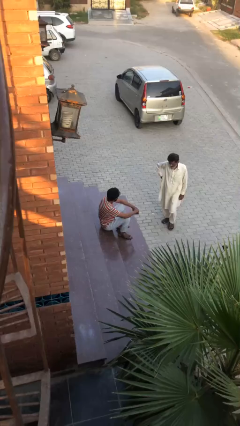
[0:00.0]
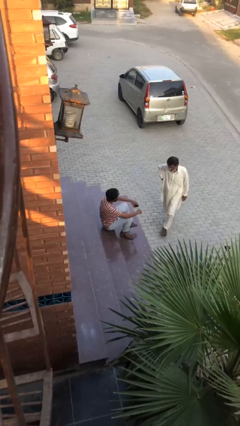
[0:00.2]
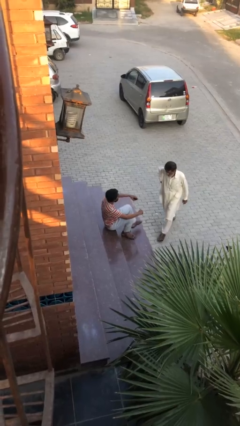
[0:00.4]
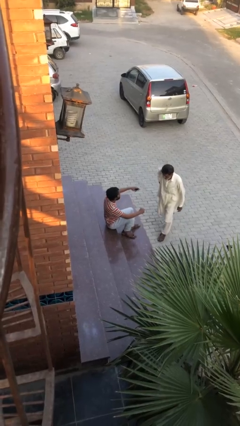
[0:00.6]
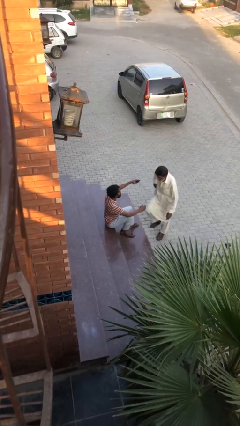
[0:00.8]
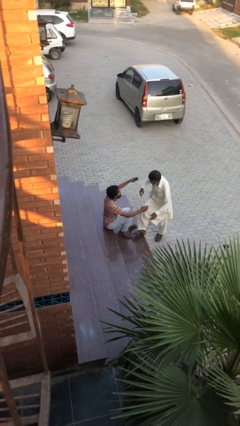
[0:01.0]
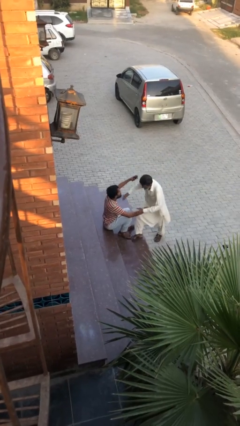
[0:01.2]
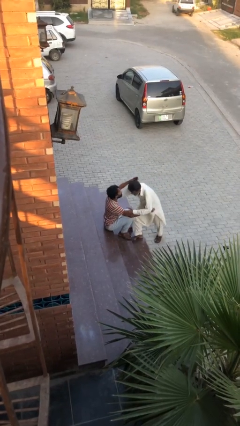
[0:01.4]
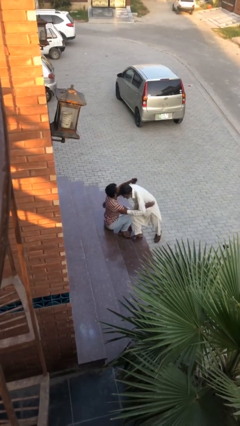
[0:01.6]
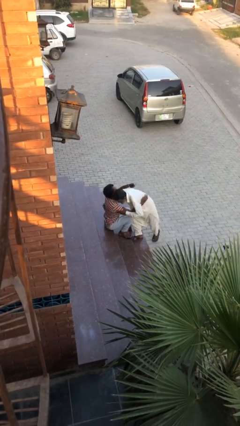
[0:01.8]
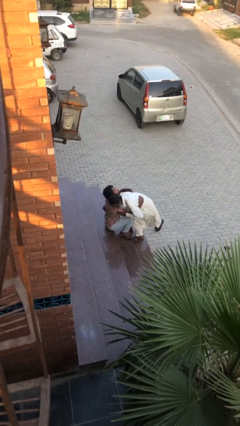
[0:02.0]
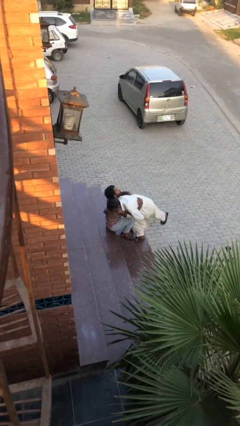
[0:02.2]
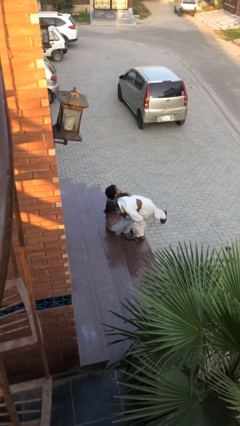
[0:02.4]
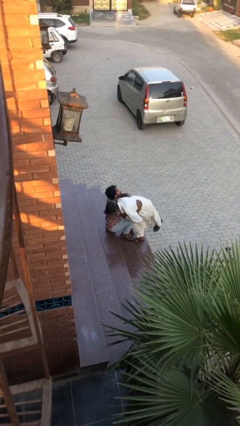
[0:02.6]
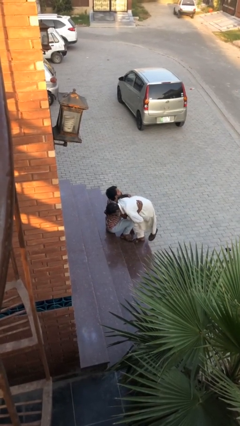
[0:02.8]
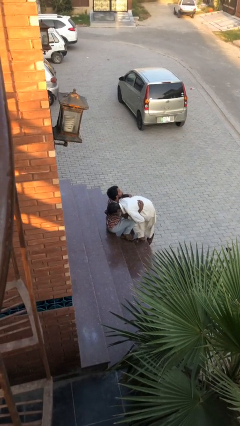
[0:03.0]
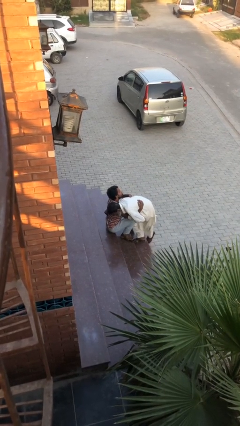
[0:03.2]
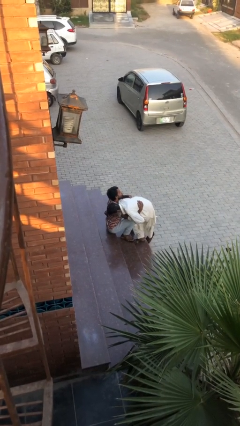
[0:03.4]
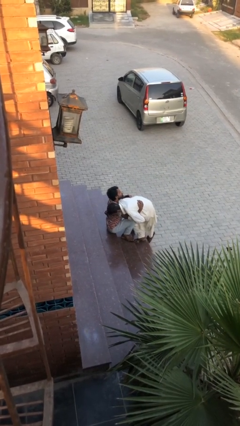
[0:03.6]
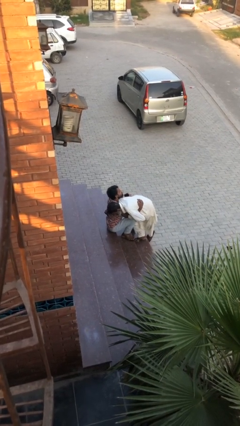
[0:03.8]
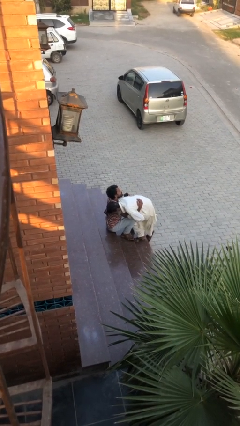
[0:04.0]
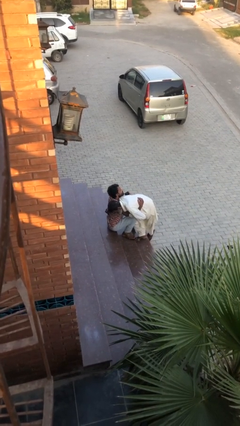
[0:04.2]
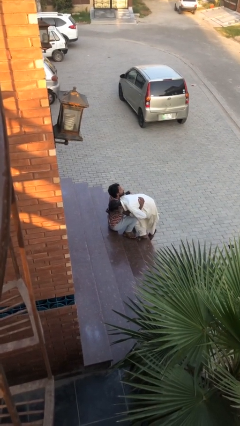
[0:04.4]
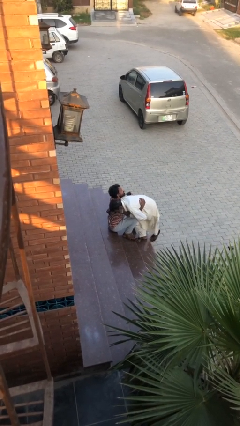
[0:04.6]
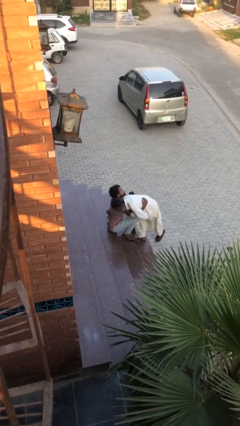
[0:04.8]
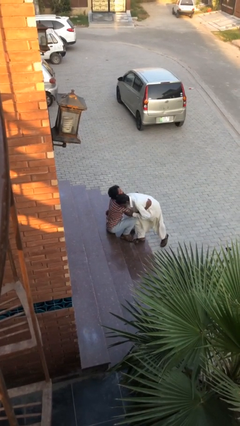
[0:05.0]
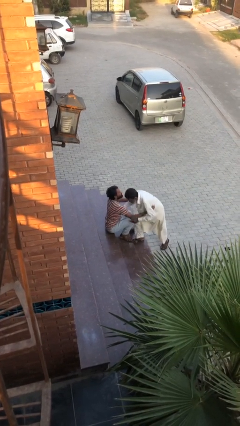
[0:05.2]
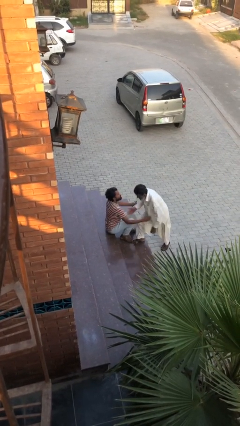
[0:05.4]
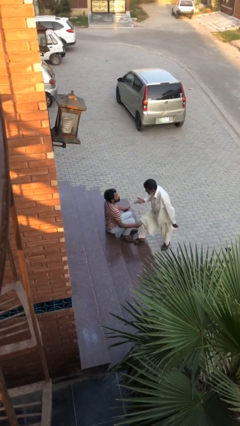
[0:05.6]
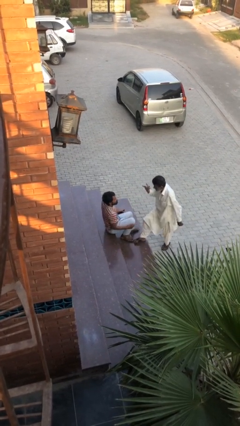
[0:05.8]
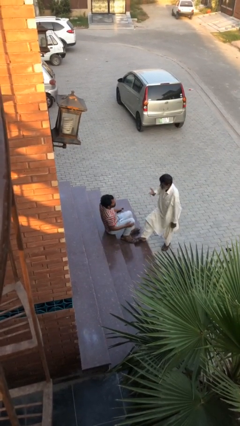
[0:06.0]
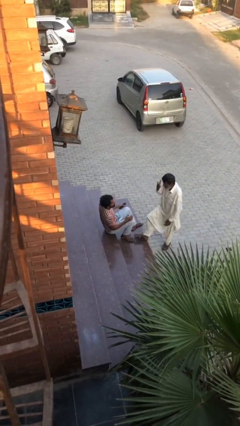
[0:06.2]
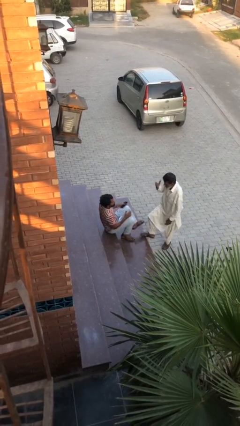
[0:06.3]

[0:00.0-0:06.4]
person embraces person

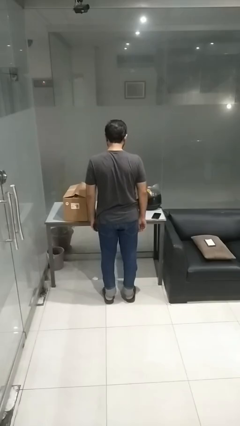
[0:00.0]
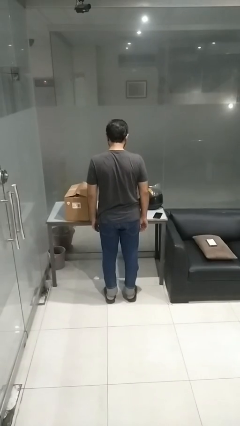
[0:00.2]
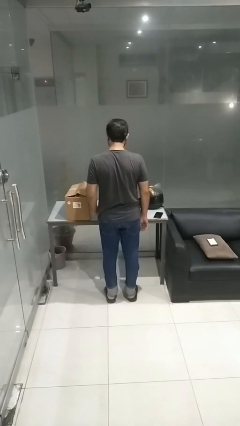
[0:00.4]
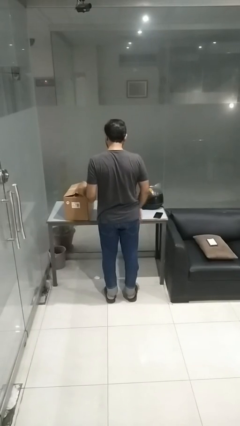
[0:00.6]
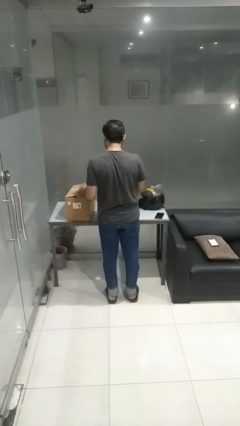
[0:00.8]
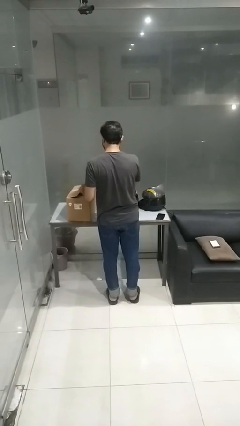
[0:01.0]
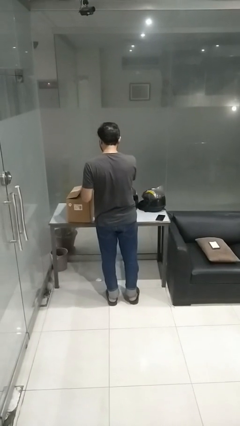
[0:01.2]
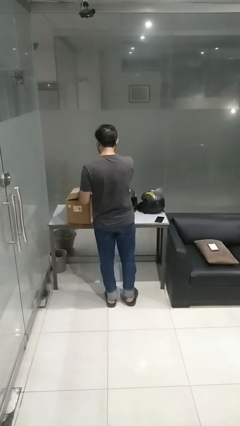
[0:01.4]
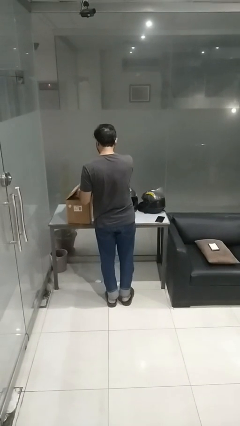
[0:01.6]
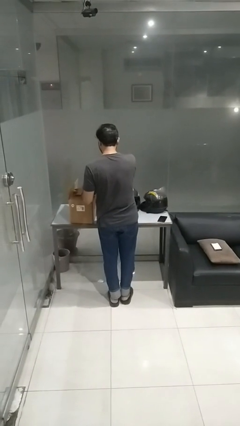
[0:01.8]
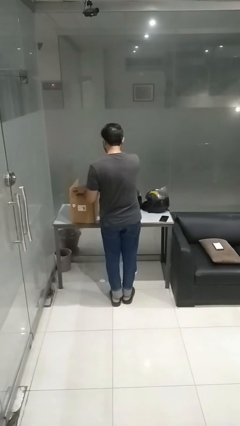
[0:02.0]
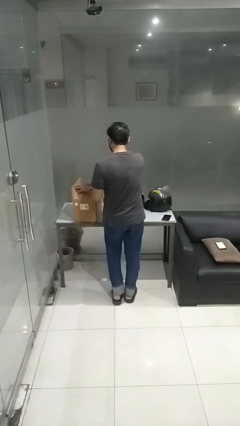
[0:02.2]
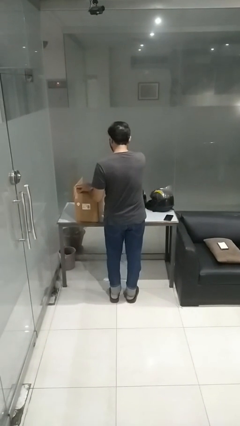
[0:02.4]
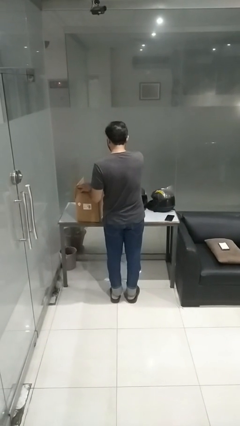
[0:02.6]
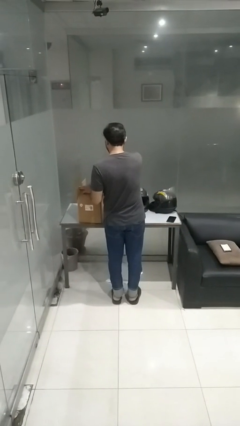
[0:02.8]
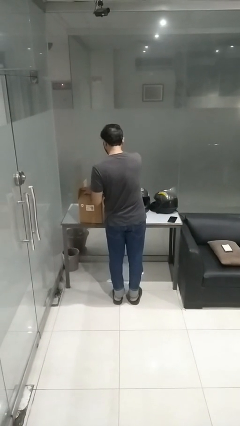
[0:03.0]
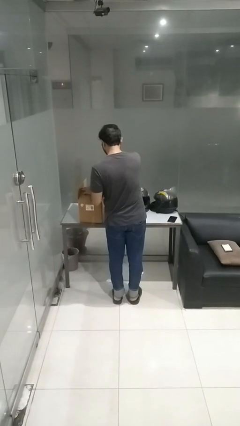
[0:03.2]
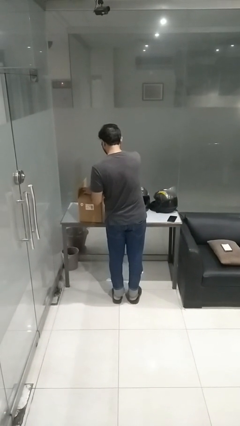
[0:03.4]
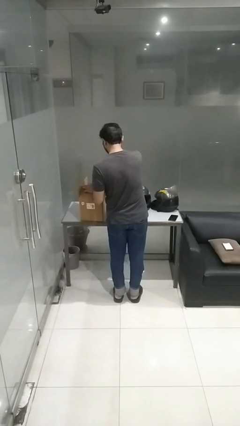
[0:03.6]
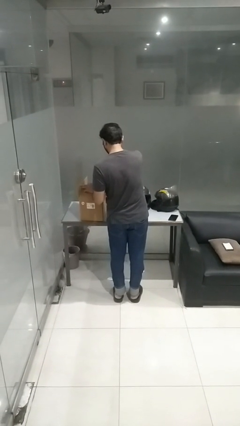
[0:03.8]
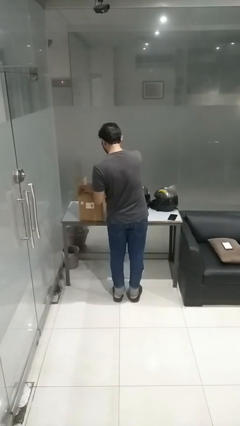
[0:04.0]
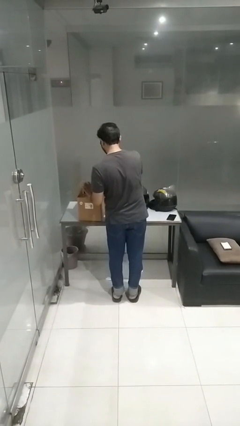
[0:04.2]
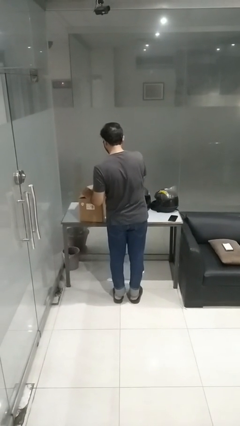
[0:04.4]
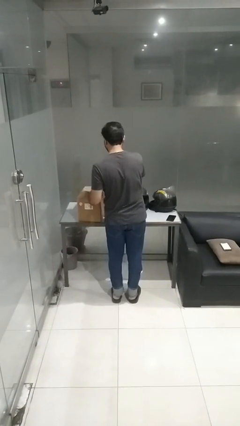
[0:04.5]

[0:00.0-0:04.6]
person searches in box

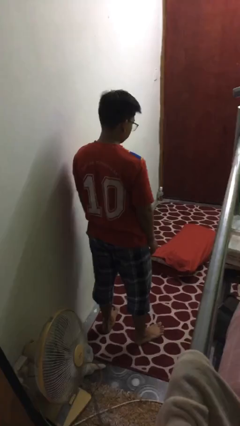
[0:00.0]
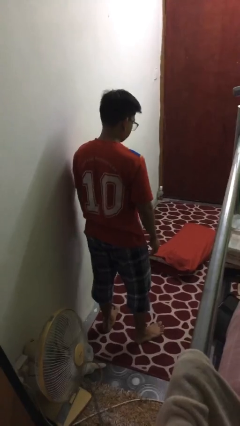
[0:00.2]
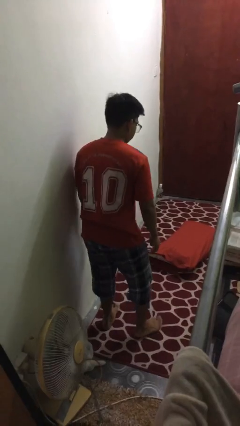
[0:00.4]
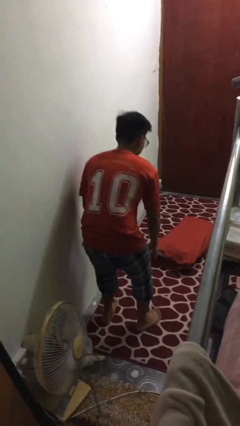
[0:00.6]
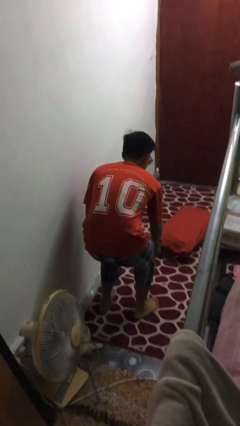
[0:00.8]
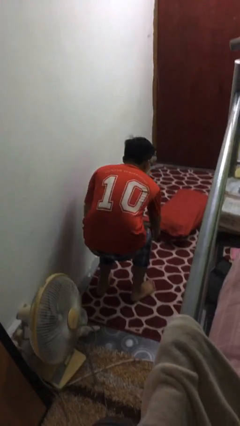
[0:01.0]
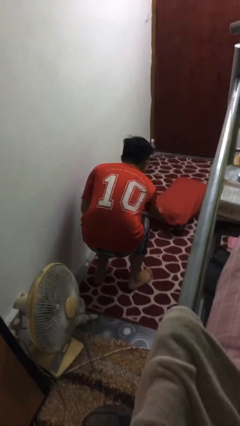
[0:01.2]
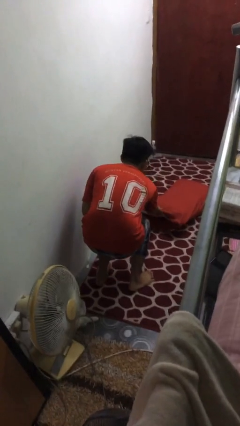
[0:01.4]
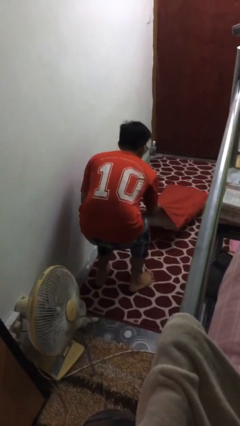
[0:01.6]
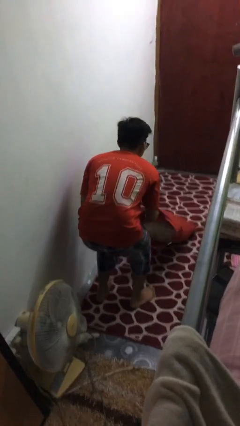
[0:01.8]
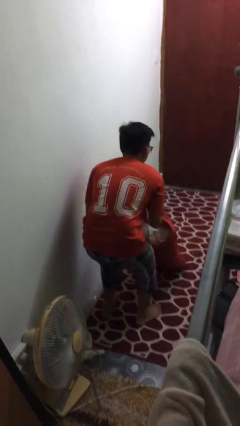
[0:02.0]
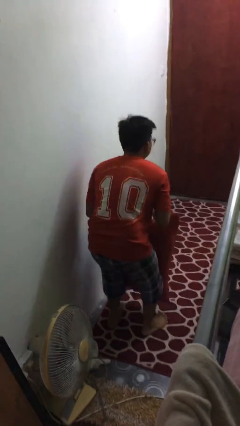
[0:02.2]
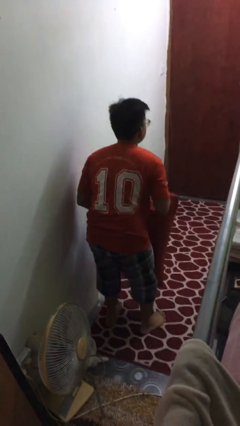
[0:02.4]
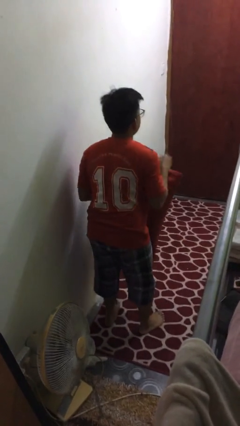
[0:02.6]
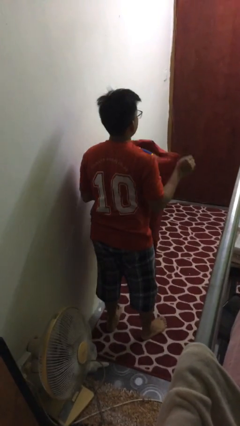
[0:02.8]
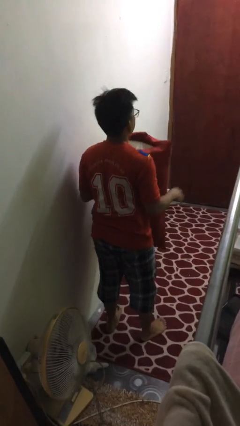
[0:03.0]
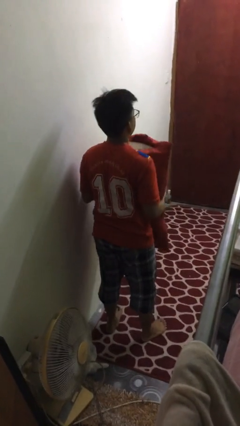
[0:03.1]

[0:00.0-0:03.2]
person picks up object from floor

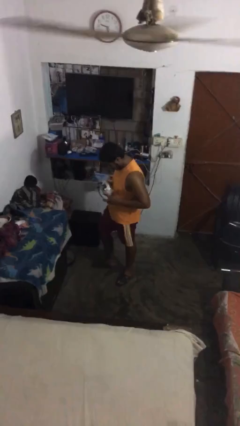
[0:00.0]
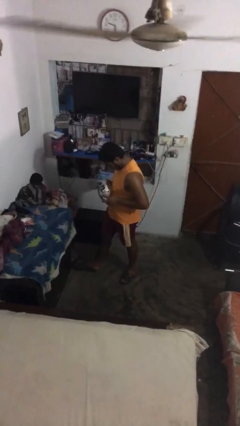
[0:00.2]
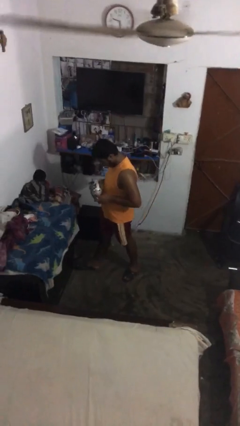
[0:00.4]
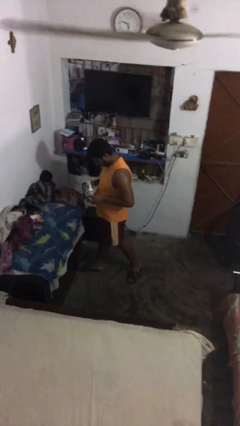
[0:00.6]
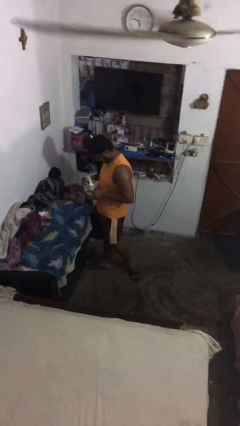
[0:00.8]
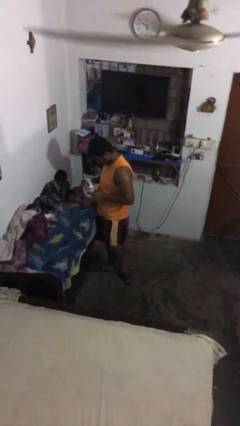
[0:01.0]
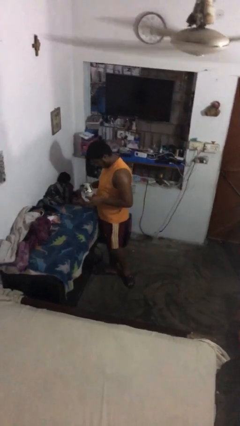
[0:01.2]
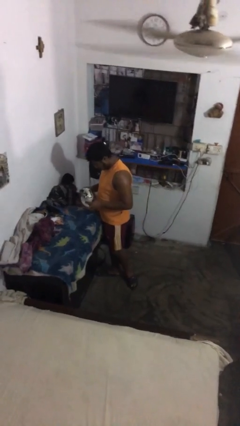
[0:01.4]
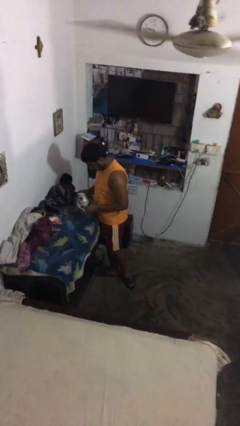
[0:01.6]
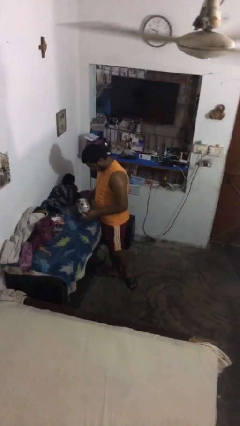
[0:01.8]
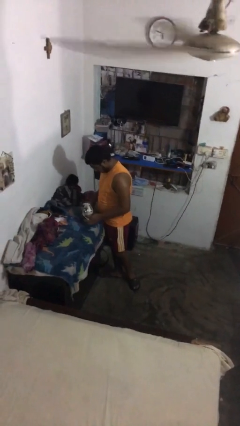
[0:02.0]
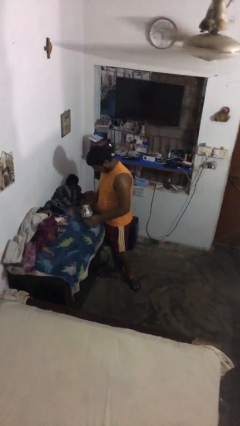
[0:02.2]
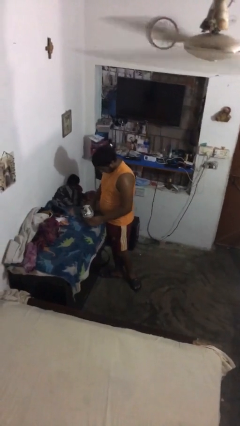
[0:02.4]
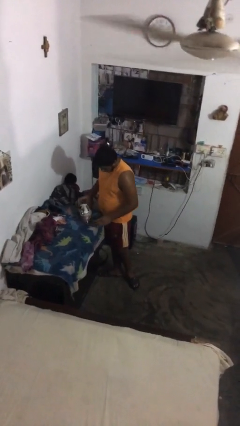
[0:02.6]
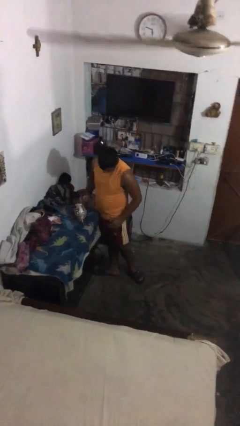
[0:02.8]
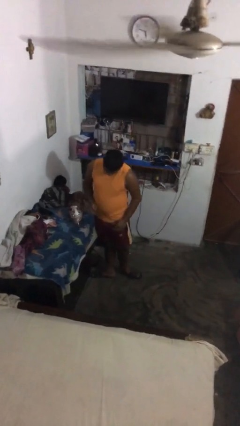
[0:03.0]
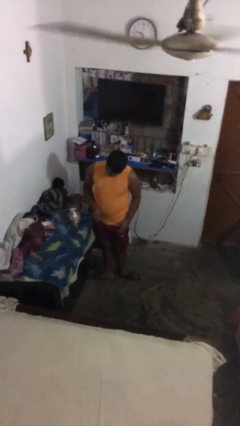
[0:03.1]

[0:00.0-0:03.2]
person puts down object on table
